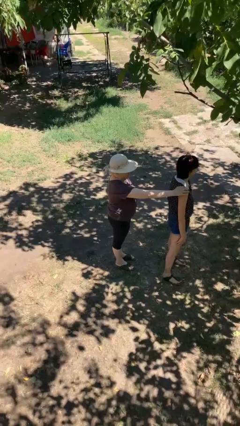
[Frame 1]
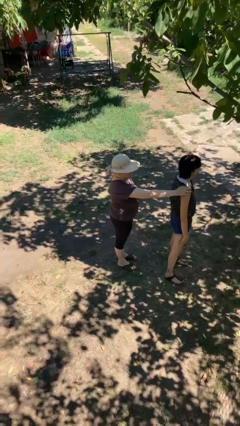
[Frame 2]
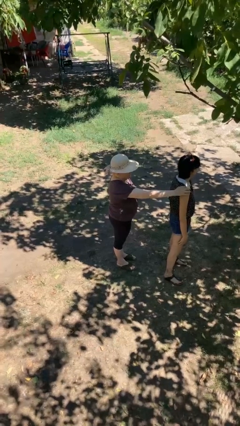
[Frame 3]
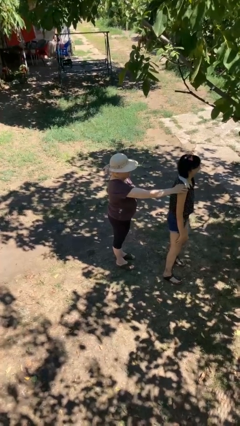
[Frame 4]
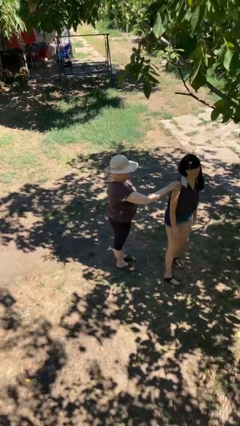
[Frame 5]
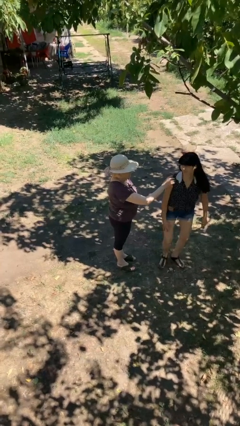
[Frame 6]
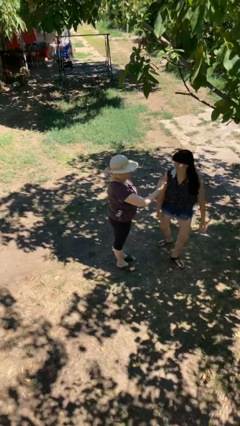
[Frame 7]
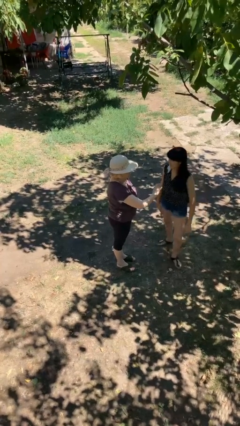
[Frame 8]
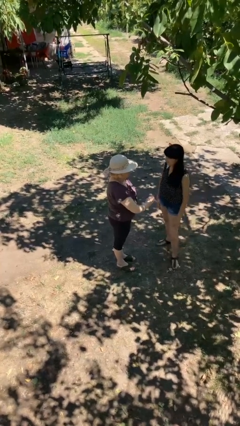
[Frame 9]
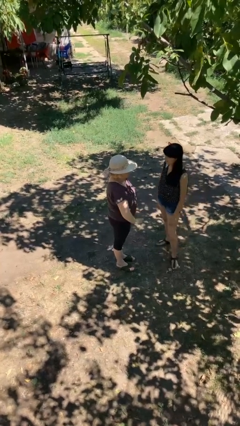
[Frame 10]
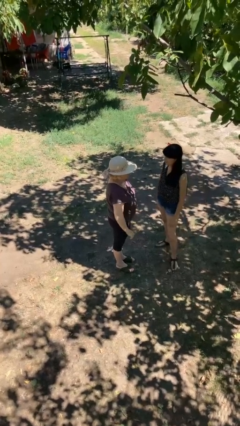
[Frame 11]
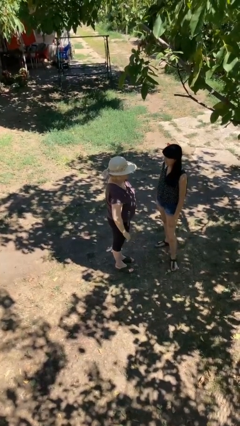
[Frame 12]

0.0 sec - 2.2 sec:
person spins person around

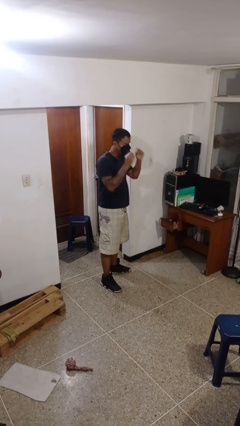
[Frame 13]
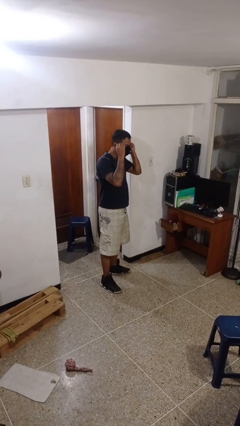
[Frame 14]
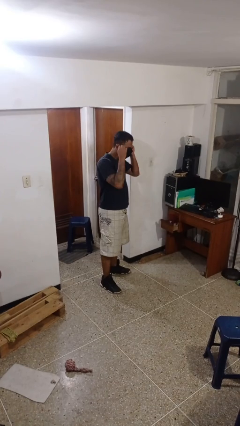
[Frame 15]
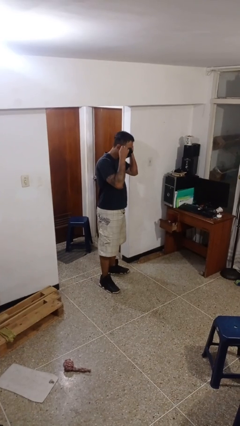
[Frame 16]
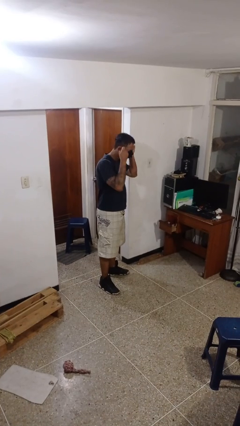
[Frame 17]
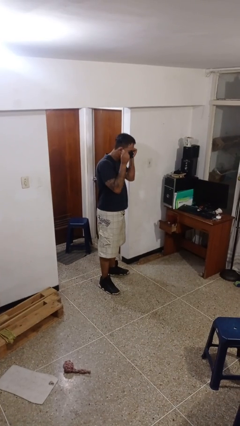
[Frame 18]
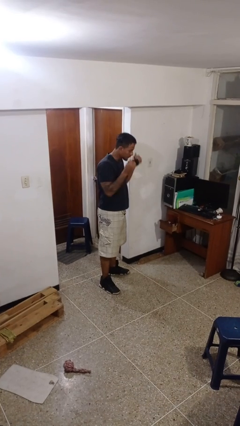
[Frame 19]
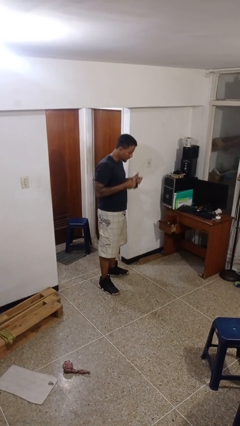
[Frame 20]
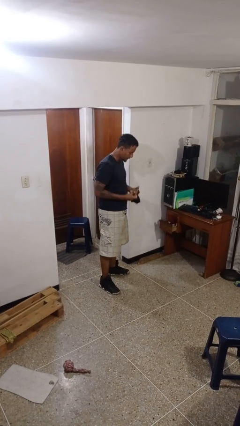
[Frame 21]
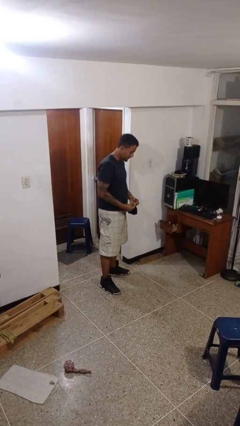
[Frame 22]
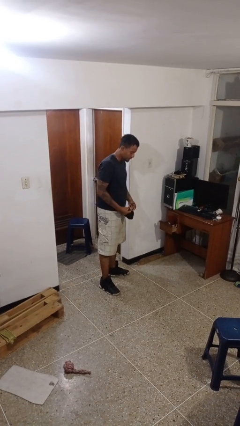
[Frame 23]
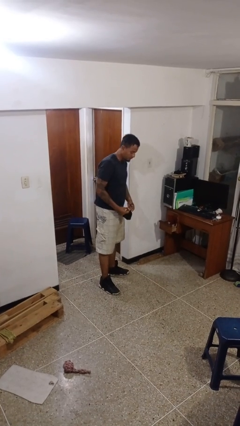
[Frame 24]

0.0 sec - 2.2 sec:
person takes off facemask

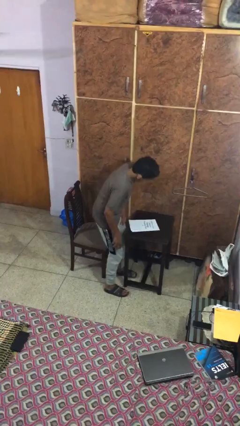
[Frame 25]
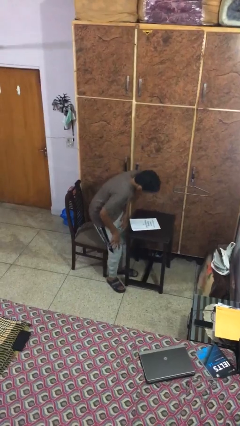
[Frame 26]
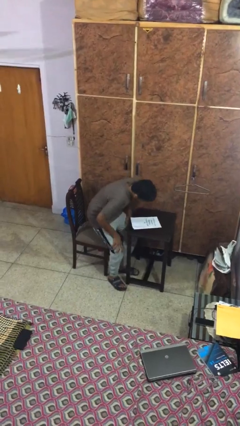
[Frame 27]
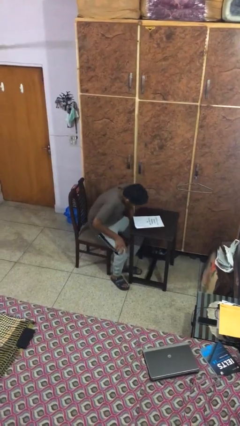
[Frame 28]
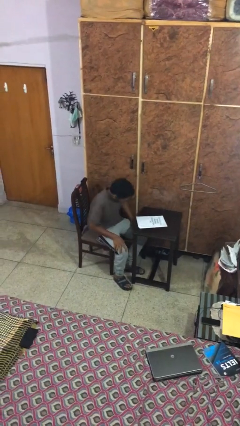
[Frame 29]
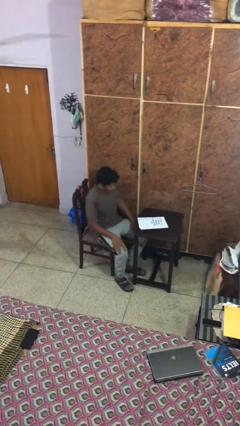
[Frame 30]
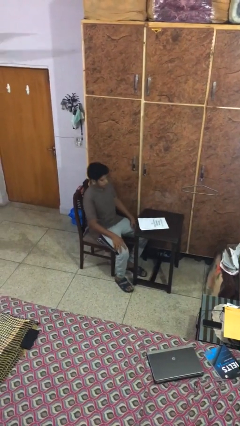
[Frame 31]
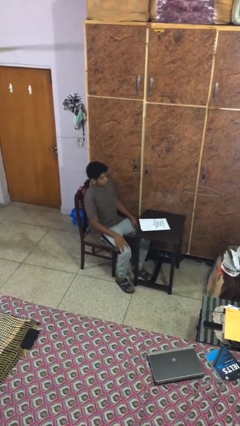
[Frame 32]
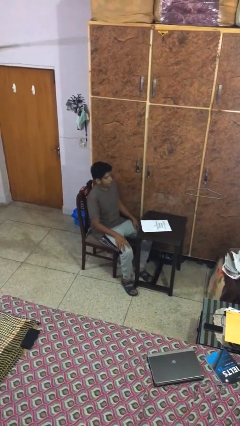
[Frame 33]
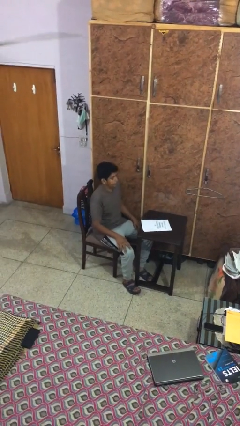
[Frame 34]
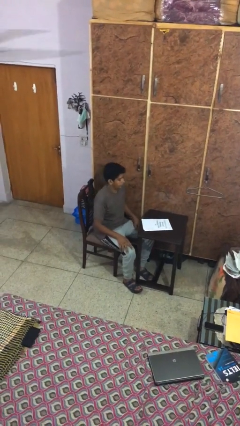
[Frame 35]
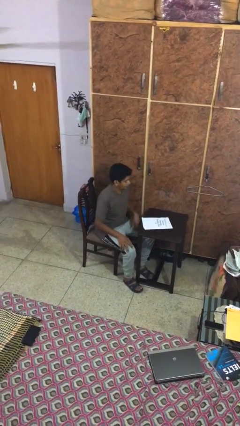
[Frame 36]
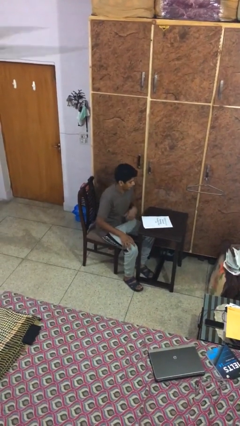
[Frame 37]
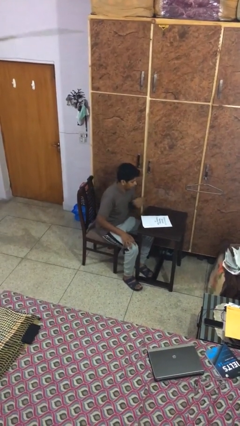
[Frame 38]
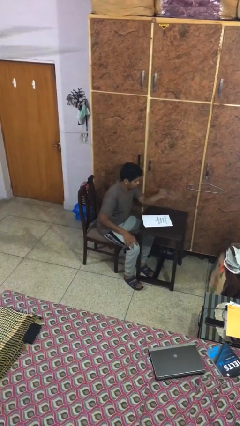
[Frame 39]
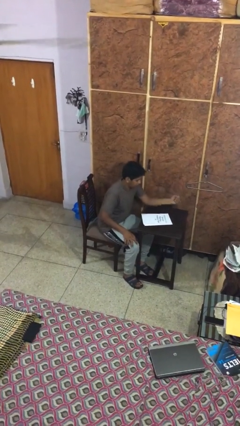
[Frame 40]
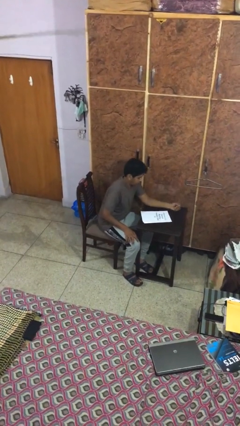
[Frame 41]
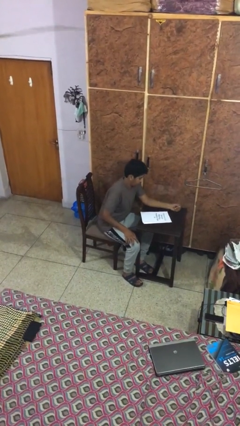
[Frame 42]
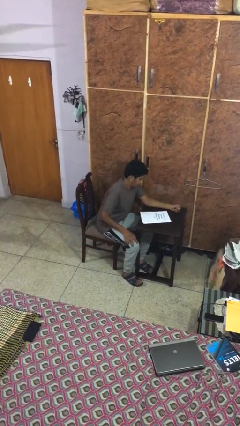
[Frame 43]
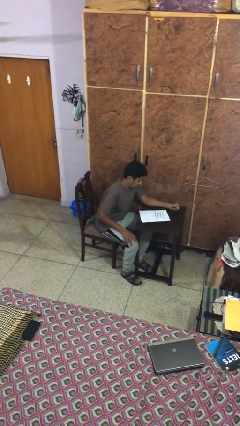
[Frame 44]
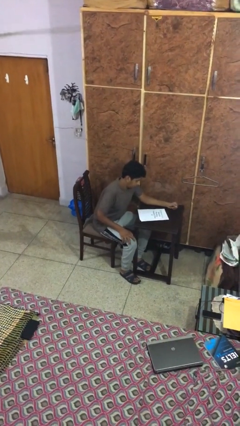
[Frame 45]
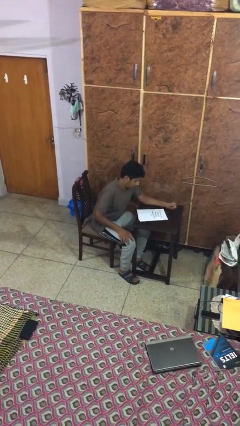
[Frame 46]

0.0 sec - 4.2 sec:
person sits down

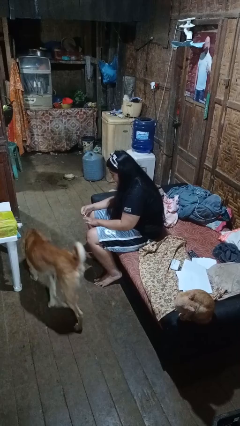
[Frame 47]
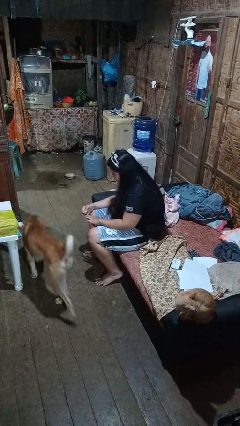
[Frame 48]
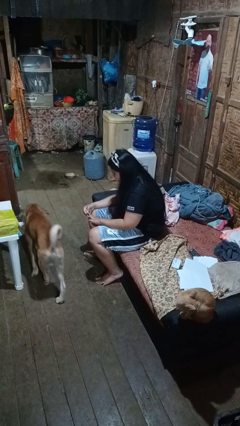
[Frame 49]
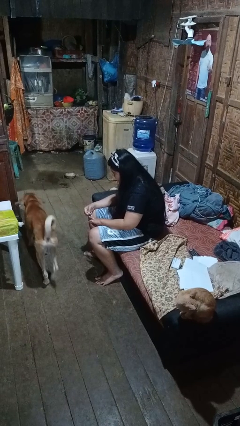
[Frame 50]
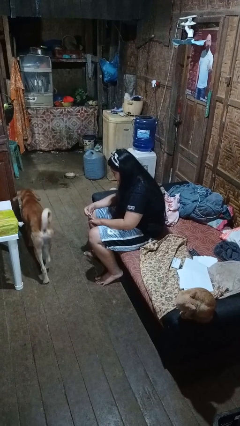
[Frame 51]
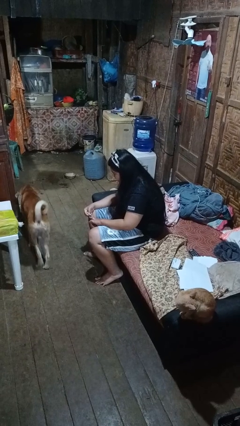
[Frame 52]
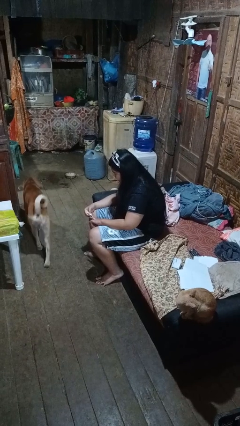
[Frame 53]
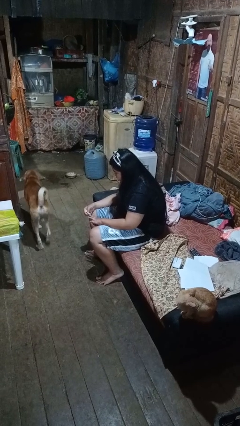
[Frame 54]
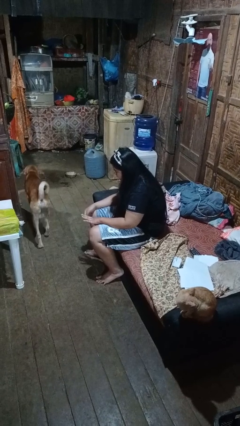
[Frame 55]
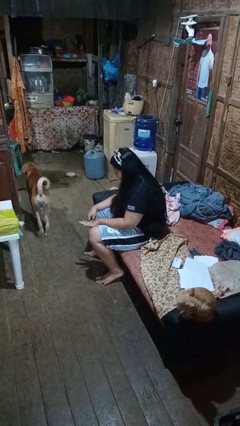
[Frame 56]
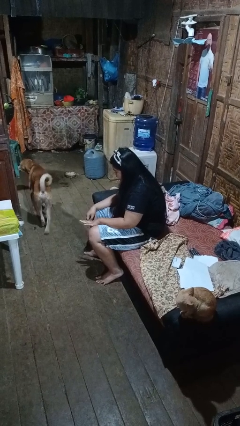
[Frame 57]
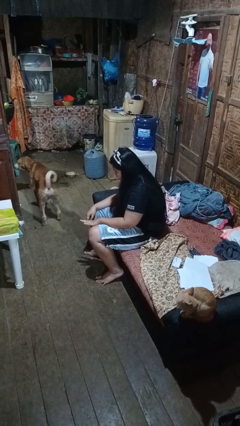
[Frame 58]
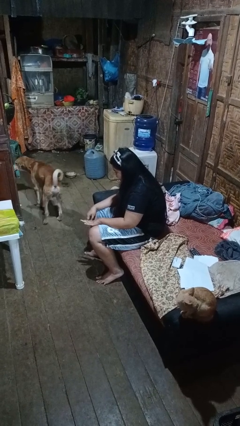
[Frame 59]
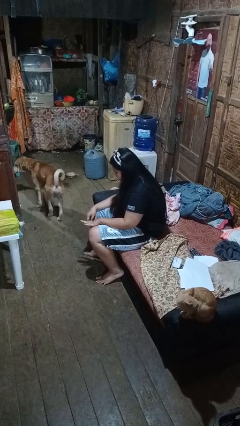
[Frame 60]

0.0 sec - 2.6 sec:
person clips fingernails

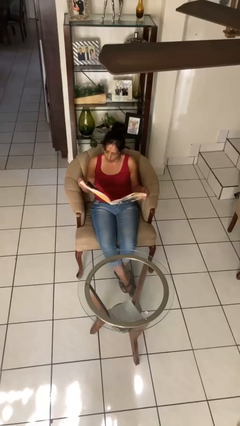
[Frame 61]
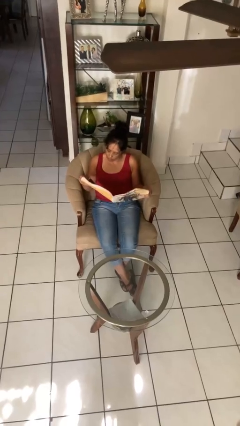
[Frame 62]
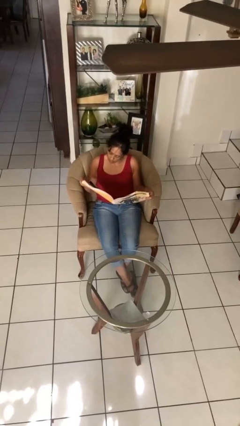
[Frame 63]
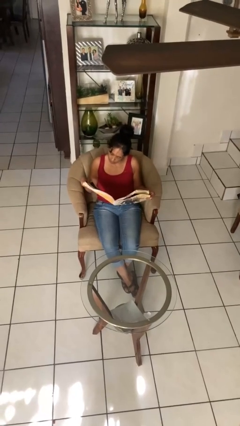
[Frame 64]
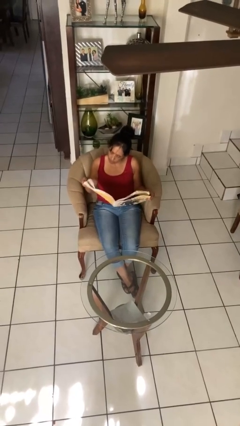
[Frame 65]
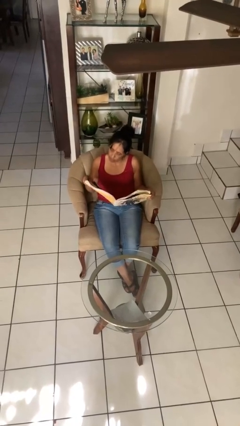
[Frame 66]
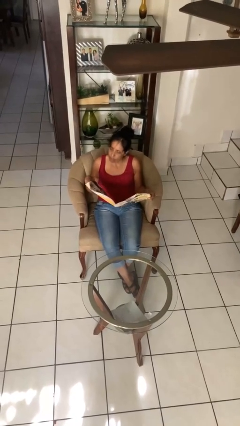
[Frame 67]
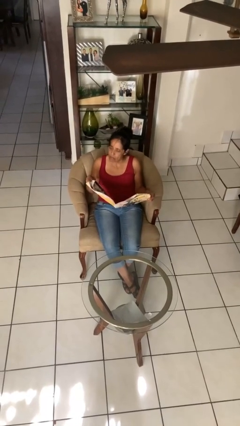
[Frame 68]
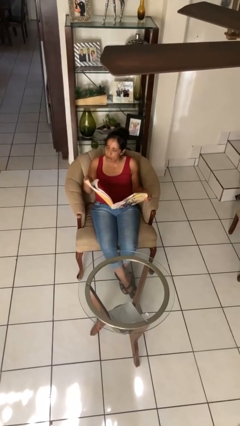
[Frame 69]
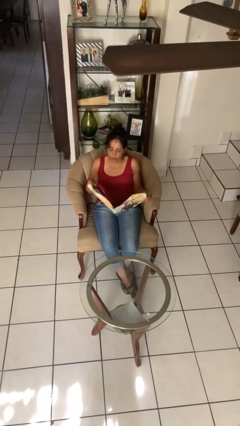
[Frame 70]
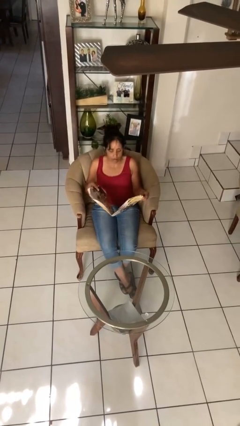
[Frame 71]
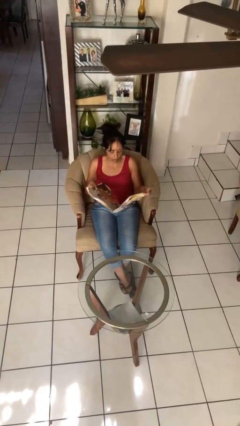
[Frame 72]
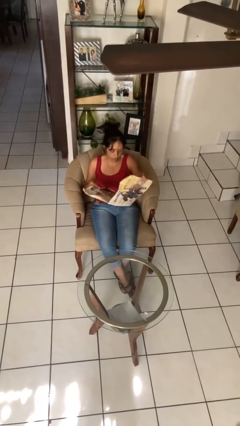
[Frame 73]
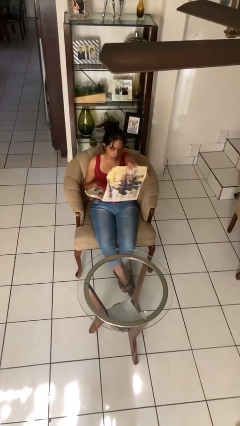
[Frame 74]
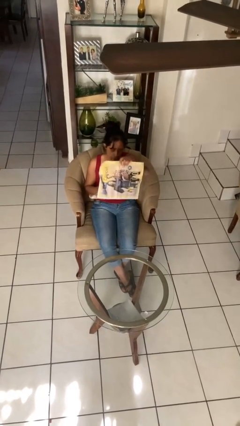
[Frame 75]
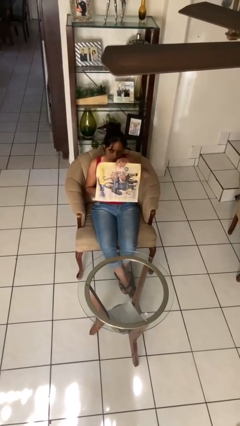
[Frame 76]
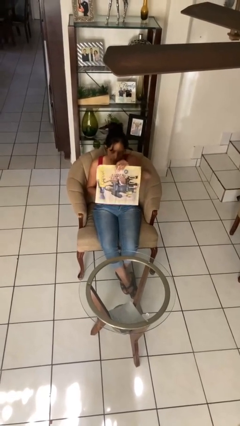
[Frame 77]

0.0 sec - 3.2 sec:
person reads newspaper

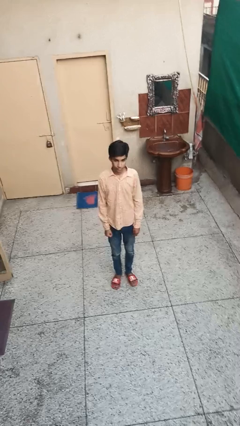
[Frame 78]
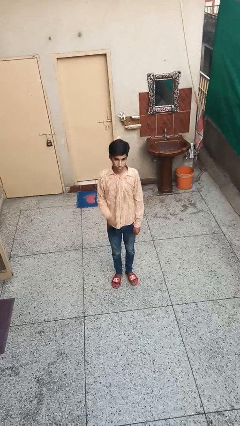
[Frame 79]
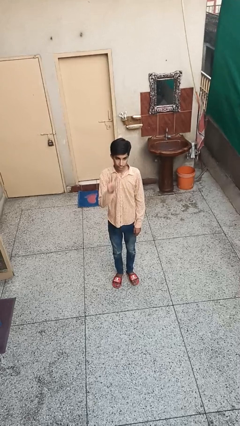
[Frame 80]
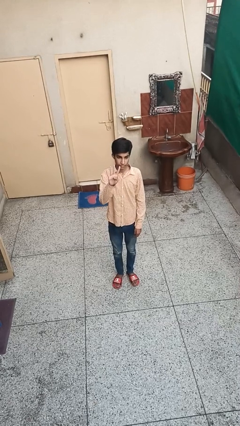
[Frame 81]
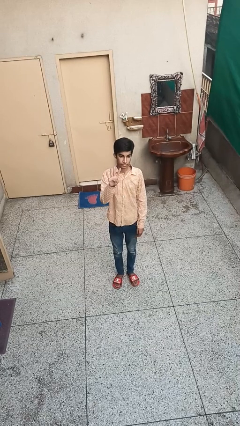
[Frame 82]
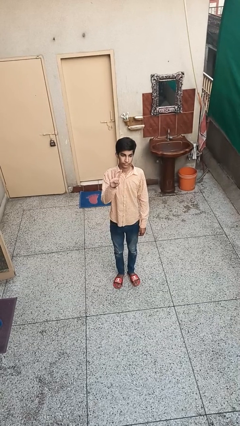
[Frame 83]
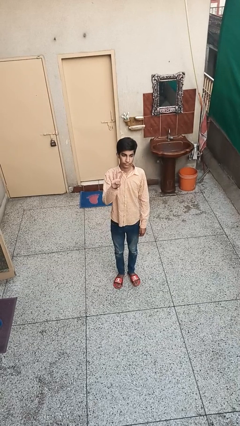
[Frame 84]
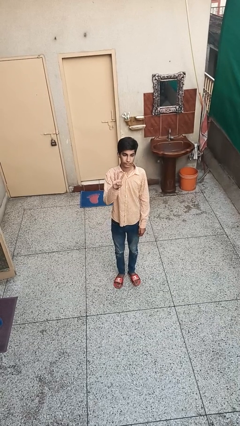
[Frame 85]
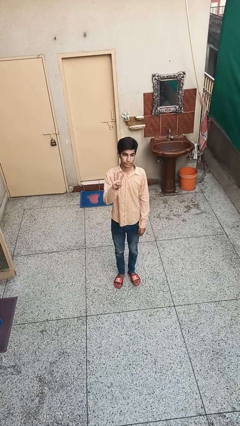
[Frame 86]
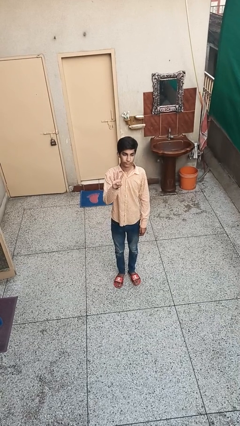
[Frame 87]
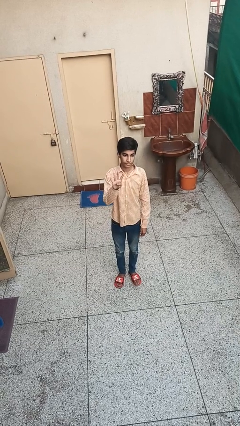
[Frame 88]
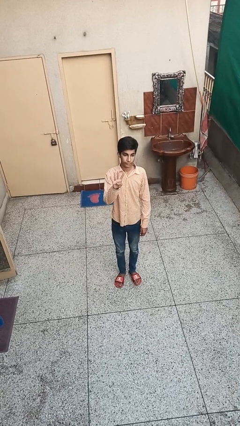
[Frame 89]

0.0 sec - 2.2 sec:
person gestures number four
